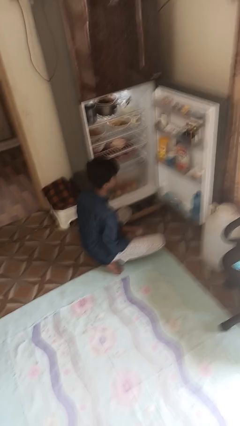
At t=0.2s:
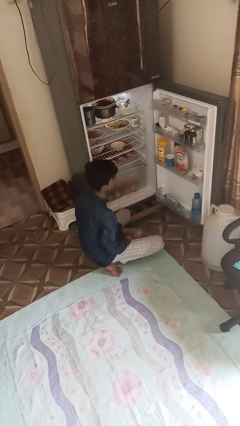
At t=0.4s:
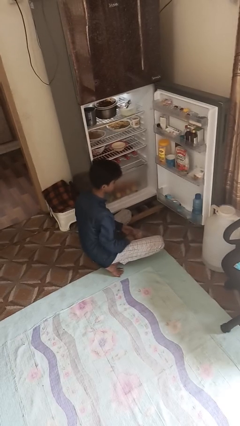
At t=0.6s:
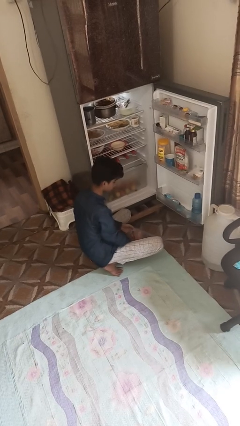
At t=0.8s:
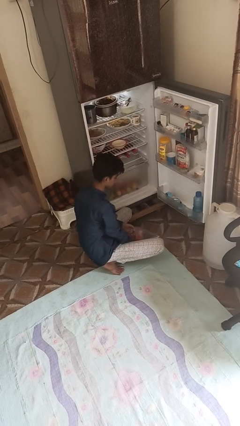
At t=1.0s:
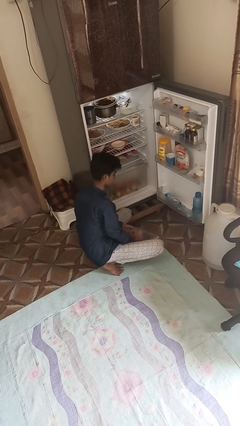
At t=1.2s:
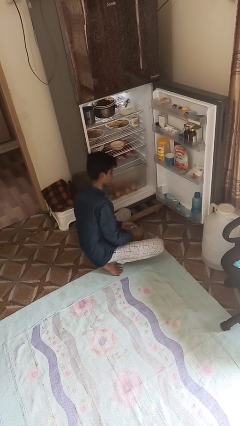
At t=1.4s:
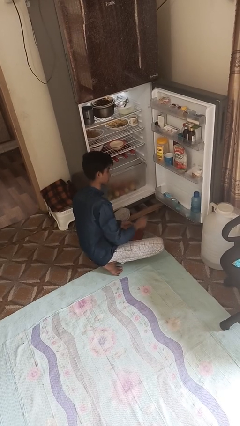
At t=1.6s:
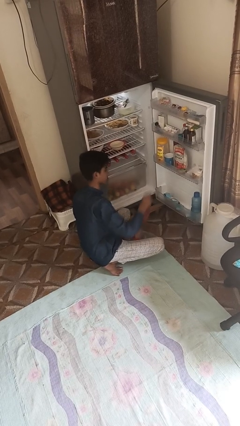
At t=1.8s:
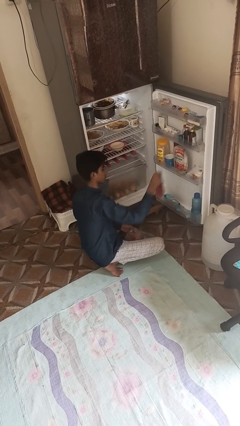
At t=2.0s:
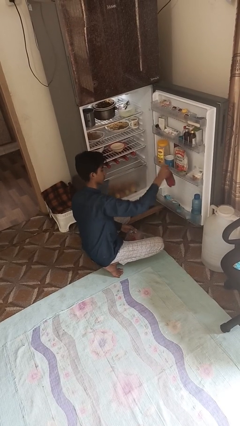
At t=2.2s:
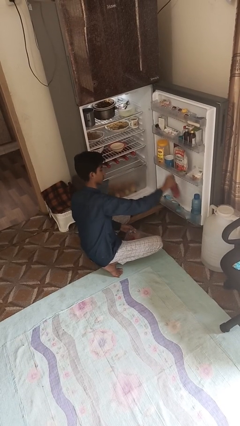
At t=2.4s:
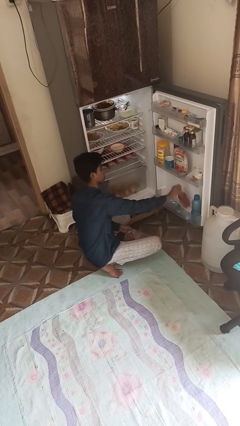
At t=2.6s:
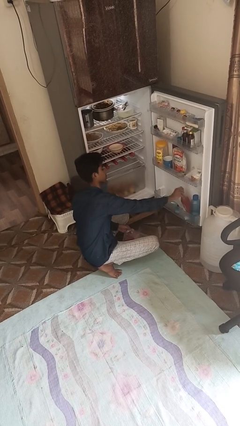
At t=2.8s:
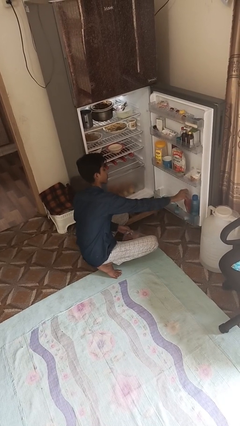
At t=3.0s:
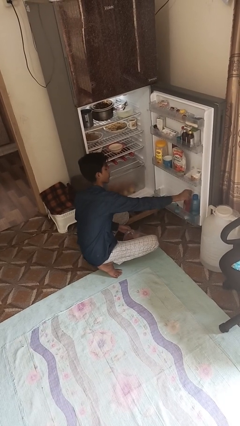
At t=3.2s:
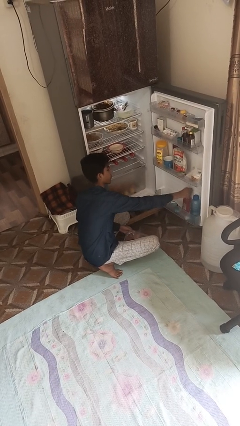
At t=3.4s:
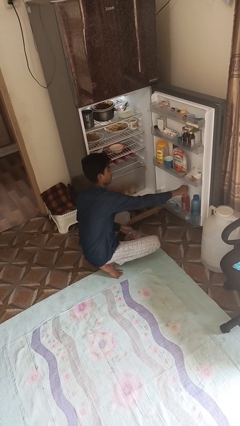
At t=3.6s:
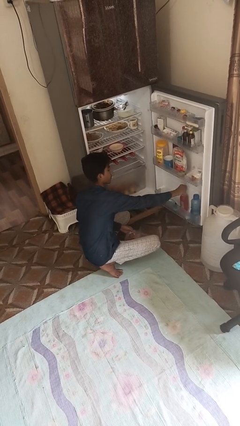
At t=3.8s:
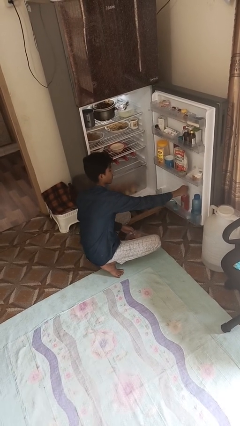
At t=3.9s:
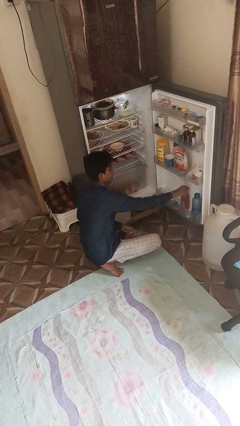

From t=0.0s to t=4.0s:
person loads groceries into refrigerator

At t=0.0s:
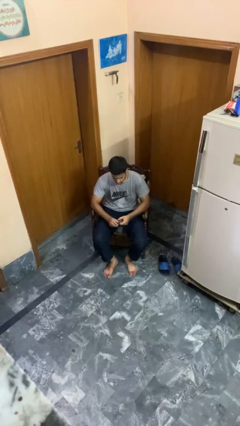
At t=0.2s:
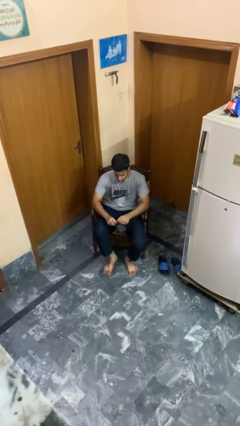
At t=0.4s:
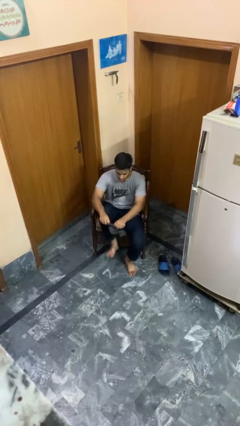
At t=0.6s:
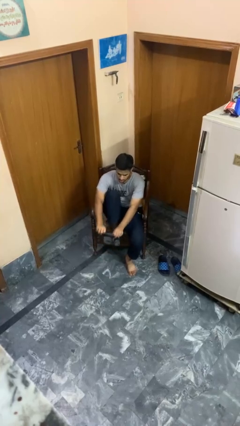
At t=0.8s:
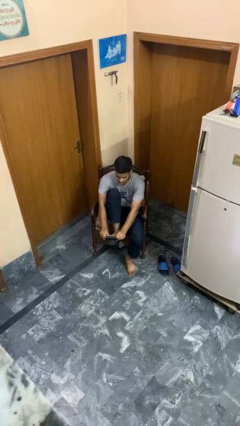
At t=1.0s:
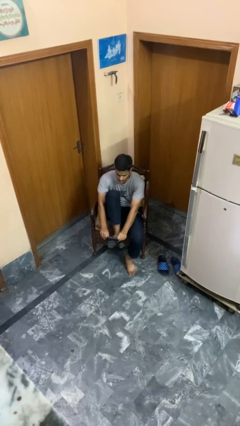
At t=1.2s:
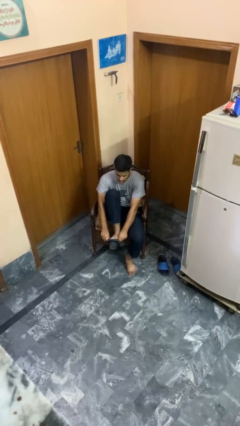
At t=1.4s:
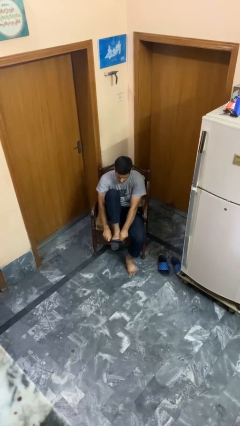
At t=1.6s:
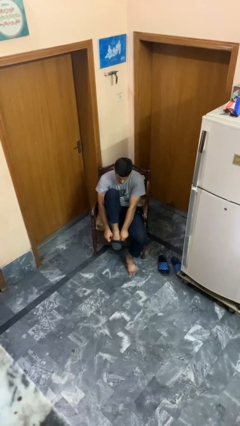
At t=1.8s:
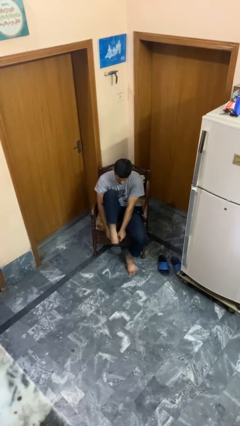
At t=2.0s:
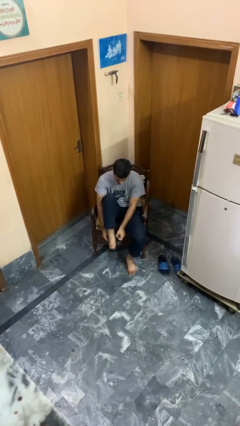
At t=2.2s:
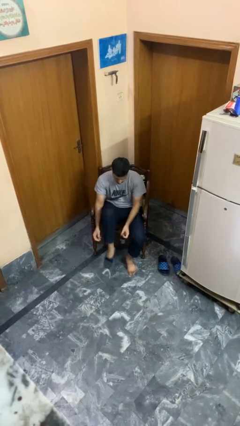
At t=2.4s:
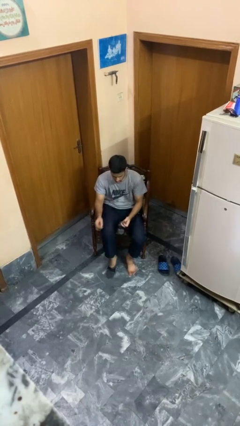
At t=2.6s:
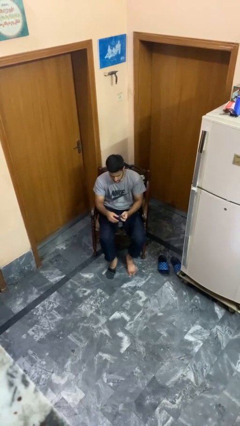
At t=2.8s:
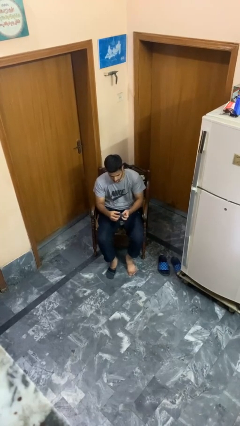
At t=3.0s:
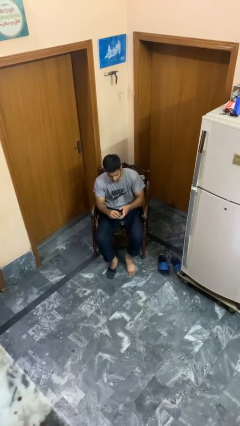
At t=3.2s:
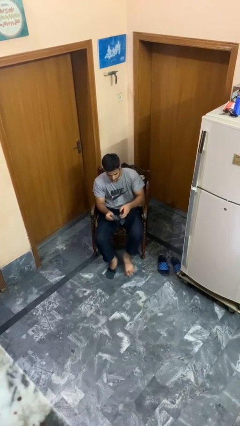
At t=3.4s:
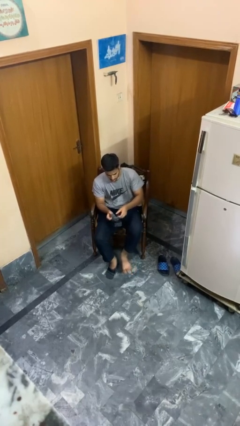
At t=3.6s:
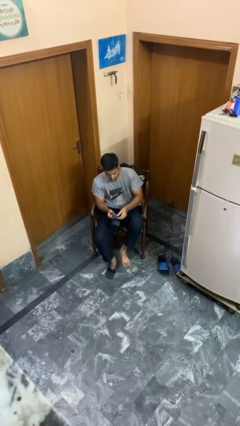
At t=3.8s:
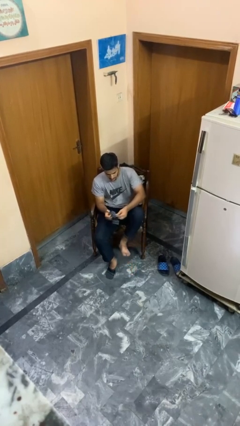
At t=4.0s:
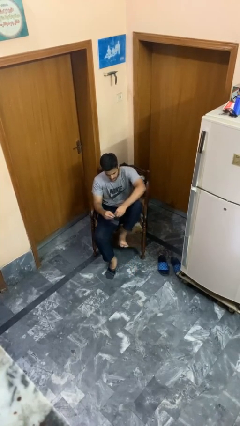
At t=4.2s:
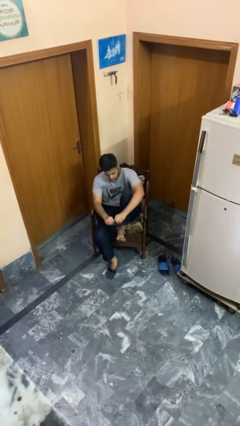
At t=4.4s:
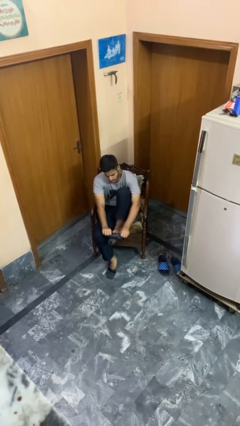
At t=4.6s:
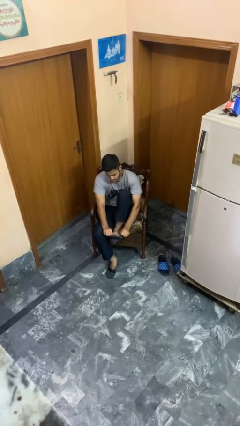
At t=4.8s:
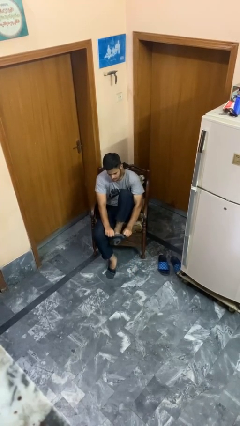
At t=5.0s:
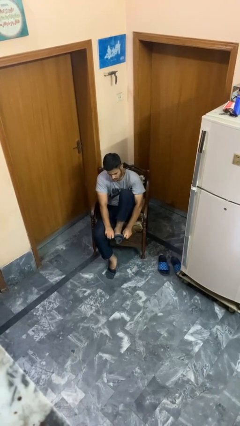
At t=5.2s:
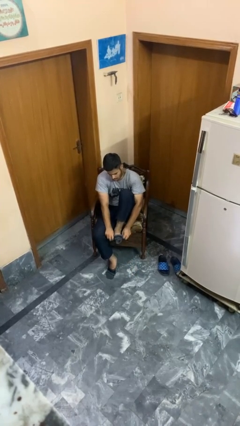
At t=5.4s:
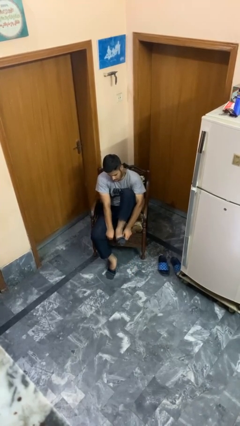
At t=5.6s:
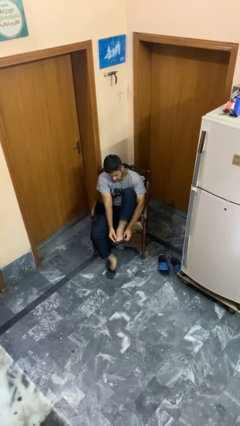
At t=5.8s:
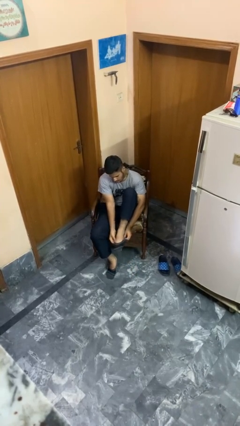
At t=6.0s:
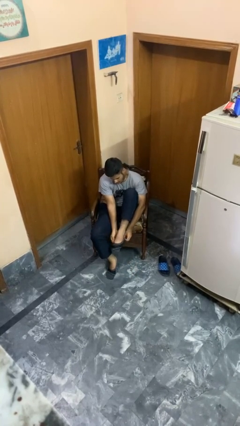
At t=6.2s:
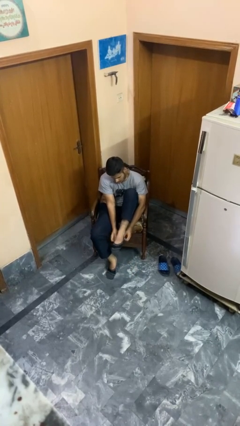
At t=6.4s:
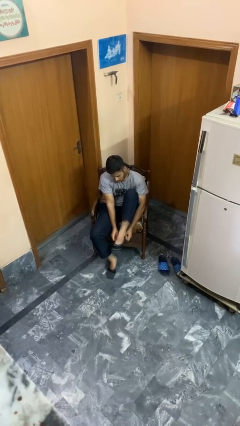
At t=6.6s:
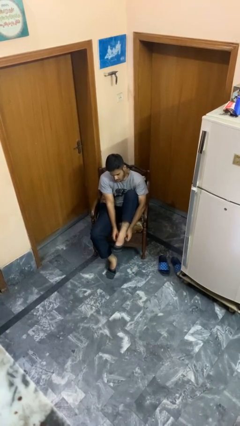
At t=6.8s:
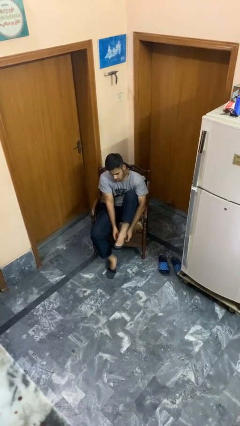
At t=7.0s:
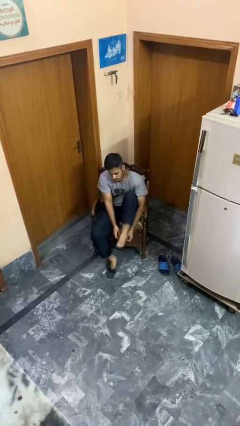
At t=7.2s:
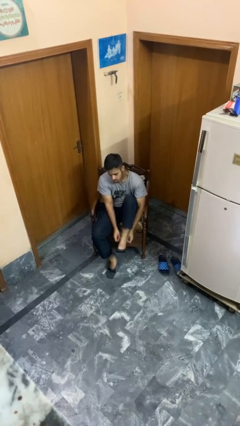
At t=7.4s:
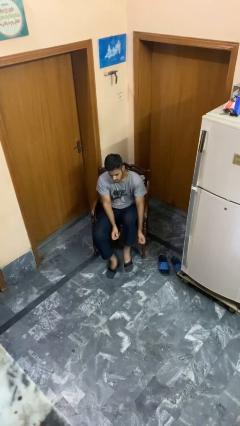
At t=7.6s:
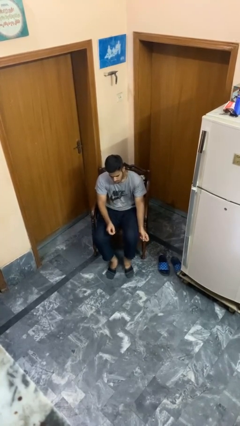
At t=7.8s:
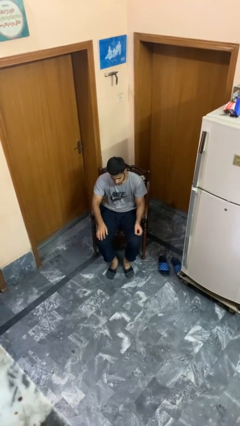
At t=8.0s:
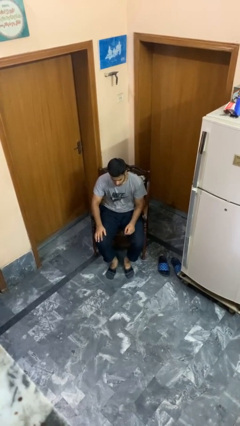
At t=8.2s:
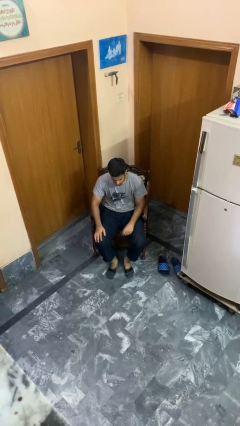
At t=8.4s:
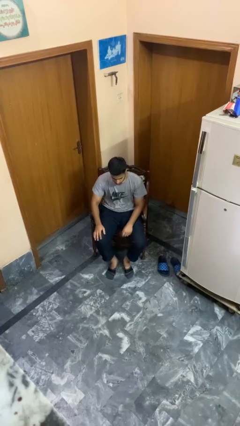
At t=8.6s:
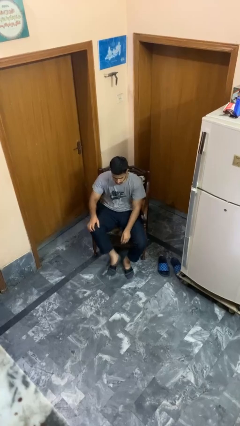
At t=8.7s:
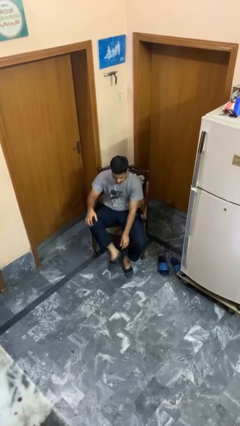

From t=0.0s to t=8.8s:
person puts on socks

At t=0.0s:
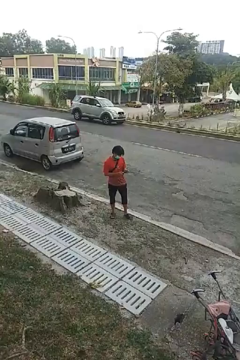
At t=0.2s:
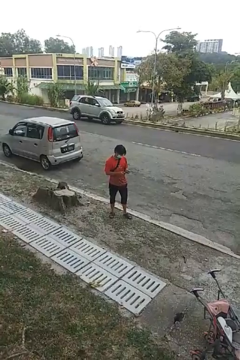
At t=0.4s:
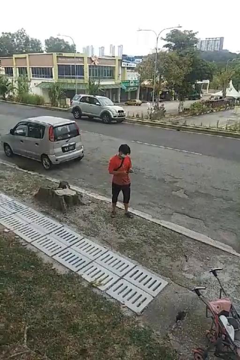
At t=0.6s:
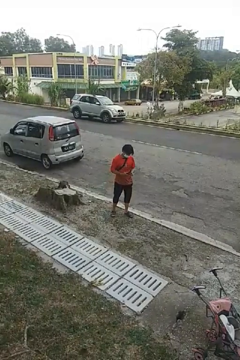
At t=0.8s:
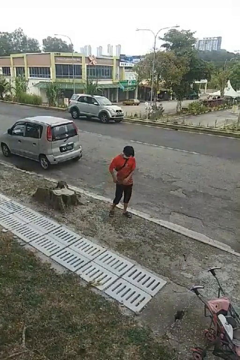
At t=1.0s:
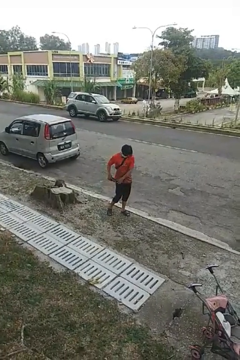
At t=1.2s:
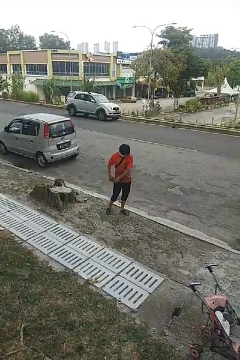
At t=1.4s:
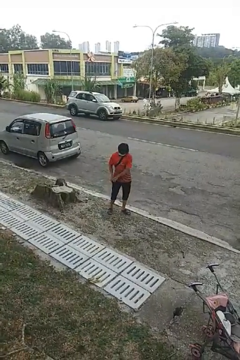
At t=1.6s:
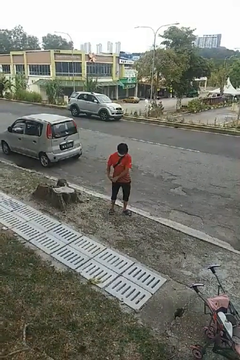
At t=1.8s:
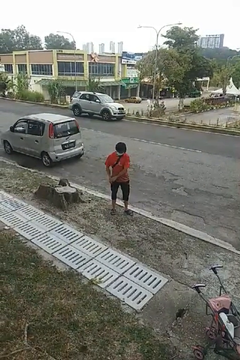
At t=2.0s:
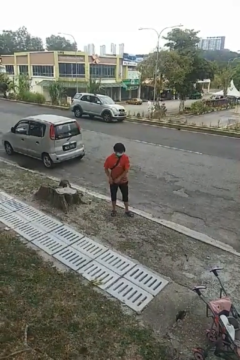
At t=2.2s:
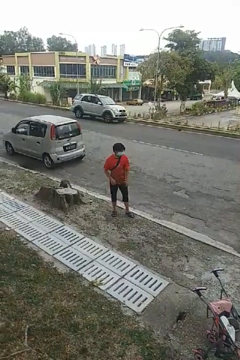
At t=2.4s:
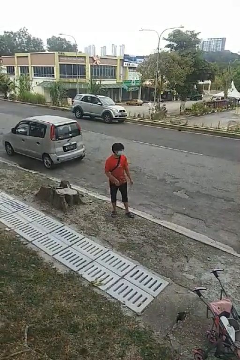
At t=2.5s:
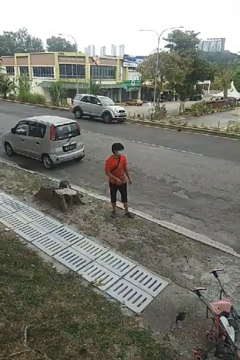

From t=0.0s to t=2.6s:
person puts phone into pocket

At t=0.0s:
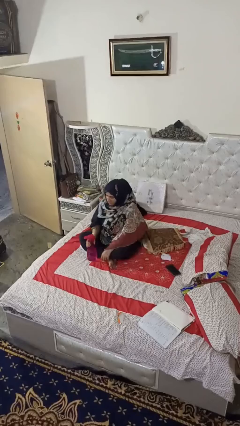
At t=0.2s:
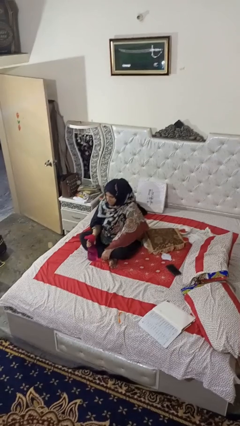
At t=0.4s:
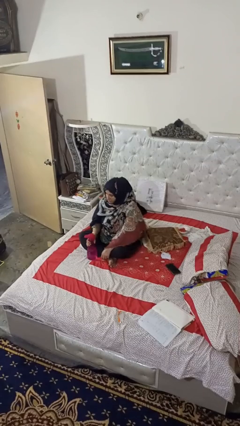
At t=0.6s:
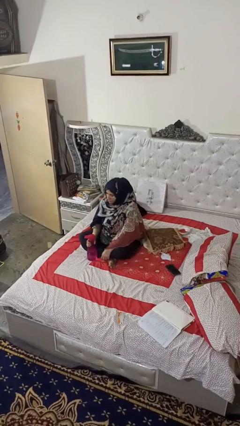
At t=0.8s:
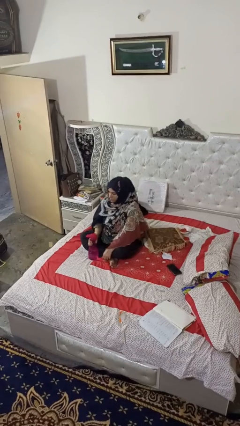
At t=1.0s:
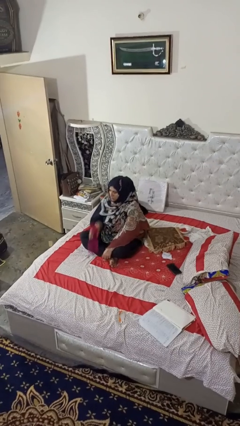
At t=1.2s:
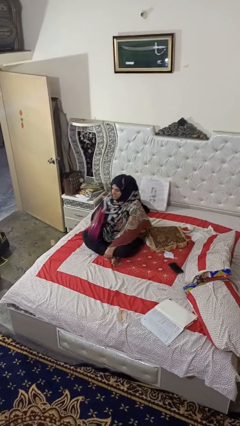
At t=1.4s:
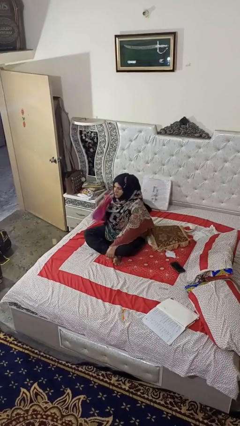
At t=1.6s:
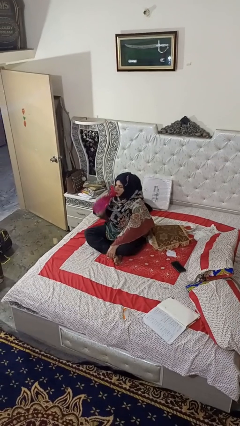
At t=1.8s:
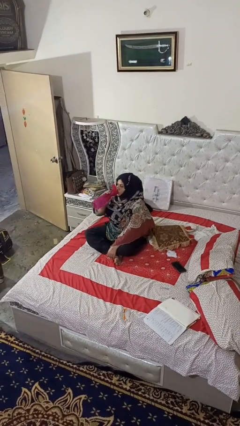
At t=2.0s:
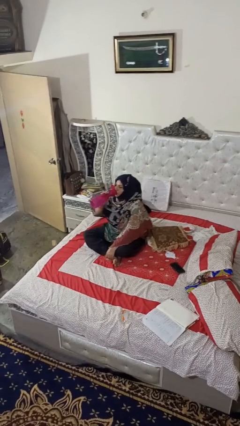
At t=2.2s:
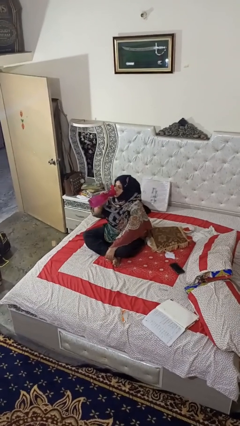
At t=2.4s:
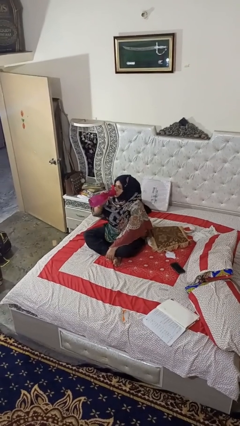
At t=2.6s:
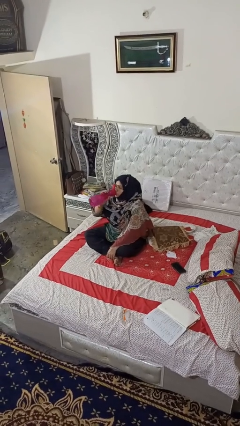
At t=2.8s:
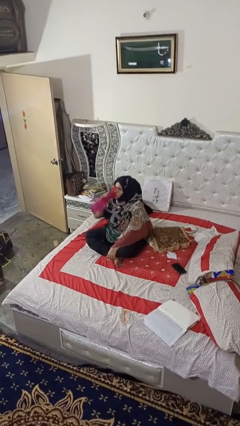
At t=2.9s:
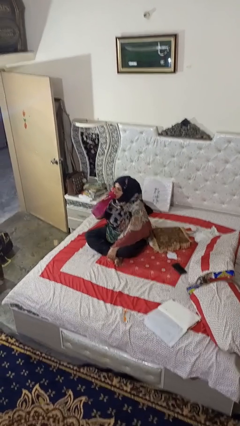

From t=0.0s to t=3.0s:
person drinks from bottle
